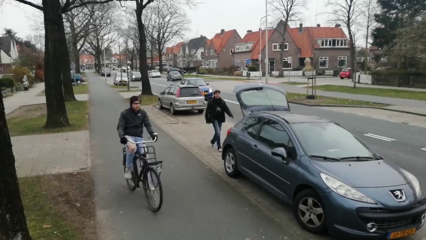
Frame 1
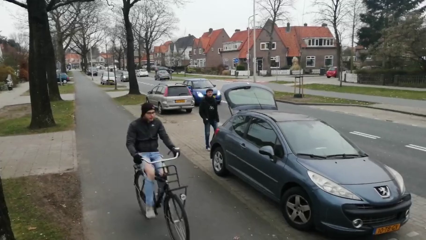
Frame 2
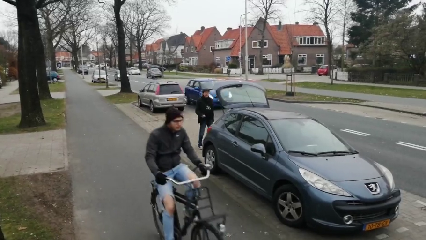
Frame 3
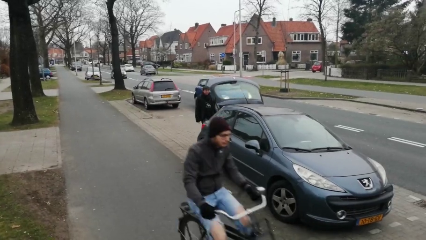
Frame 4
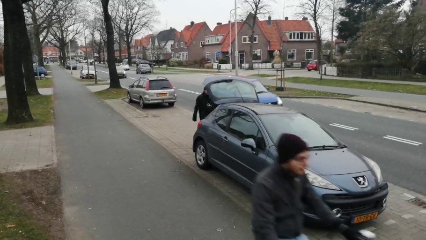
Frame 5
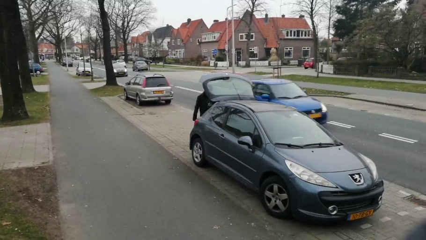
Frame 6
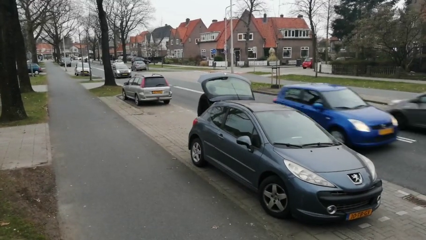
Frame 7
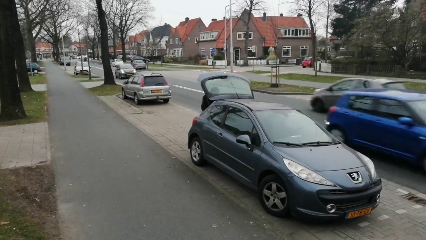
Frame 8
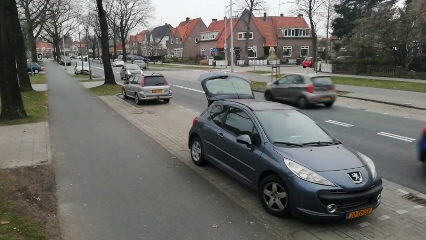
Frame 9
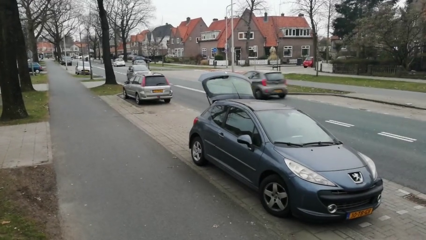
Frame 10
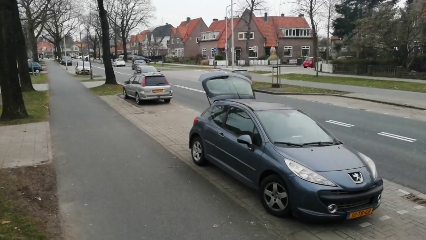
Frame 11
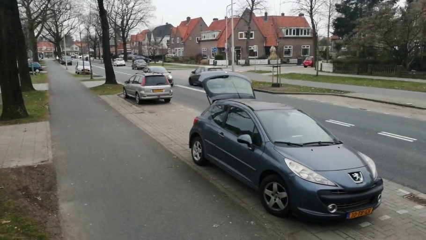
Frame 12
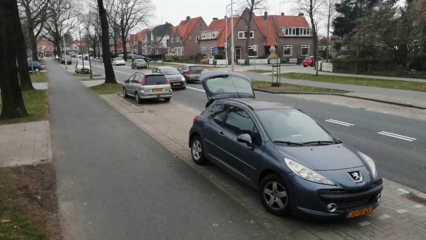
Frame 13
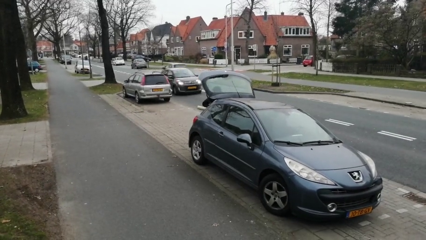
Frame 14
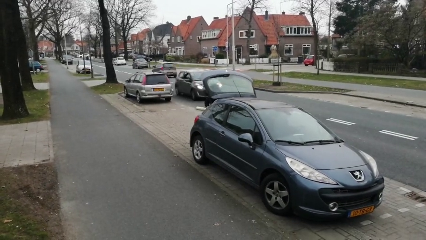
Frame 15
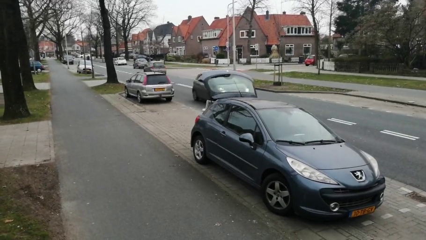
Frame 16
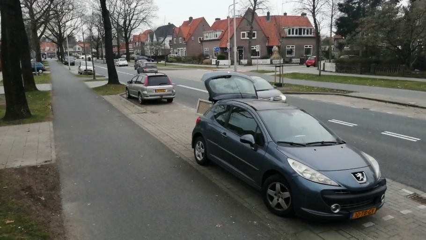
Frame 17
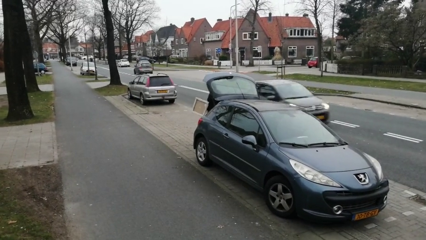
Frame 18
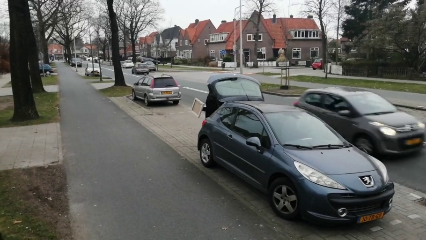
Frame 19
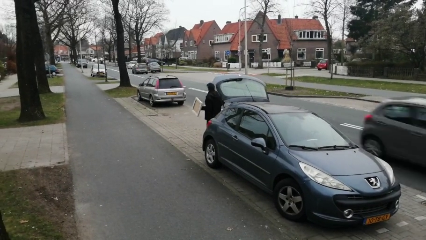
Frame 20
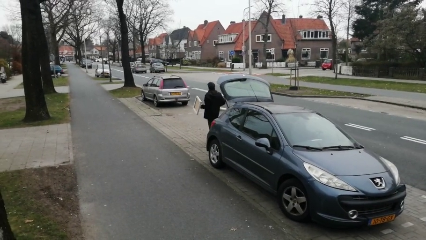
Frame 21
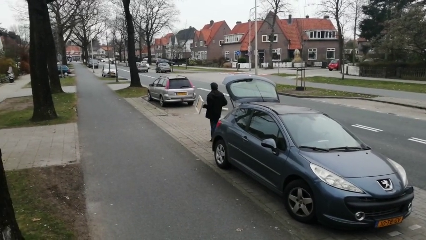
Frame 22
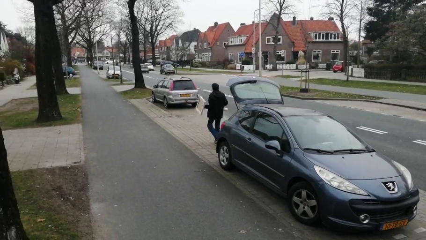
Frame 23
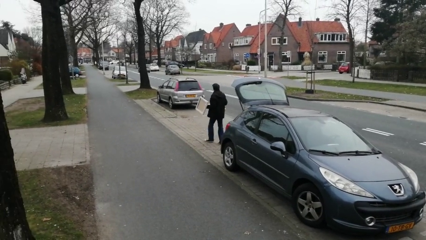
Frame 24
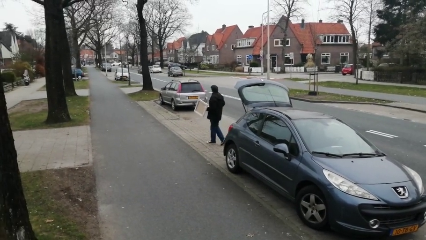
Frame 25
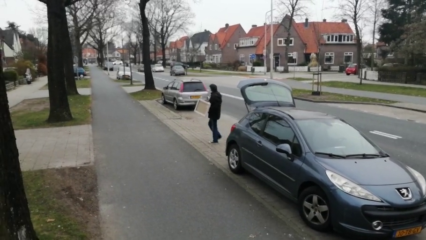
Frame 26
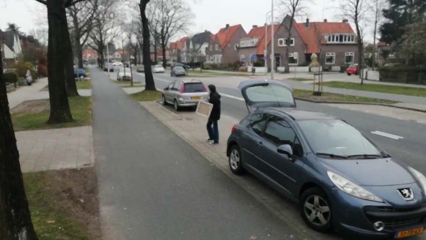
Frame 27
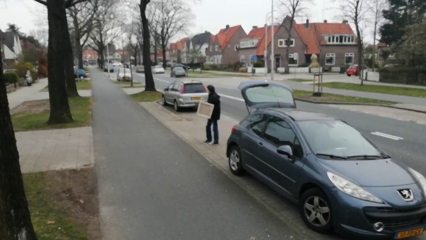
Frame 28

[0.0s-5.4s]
person unloads car

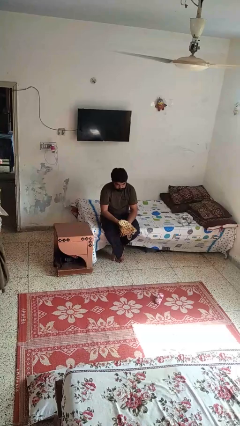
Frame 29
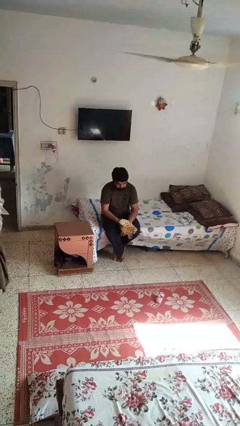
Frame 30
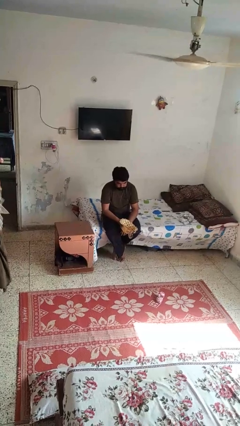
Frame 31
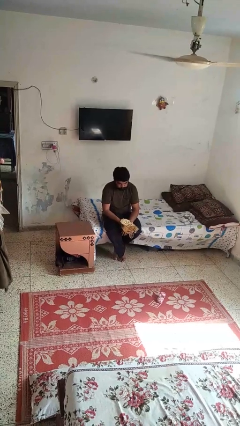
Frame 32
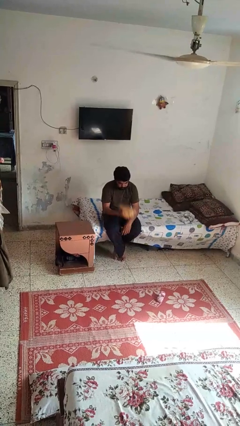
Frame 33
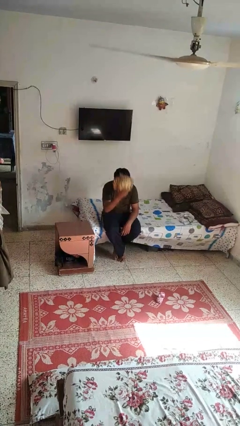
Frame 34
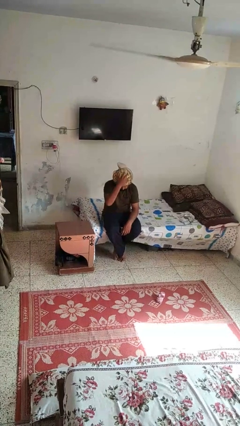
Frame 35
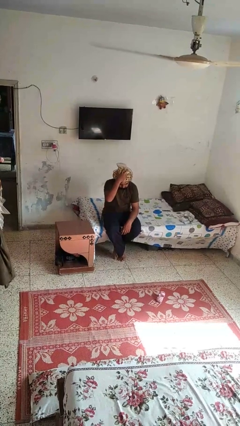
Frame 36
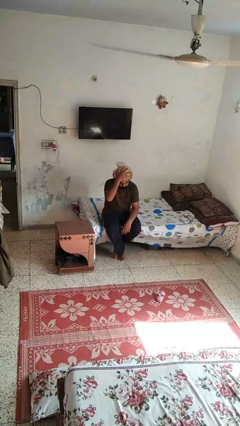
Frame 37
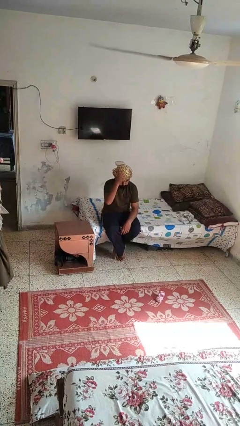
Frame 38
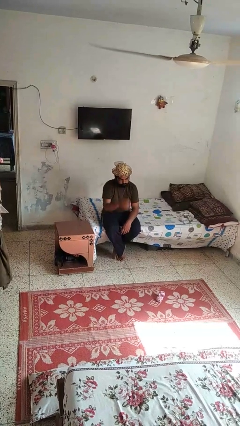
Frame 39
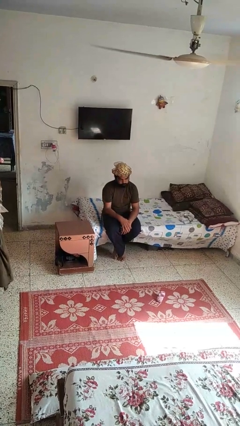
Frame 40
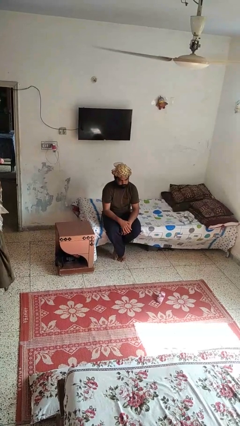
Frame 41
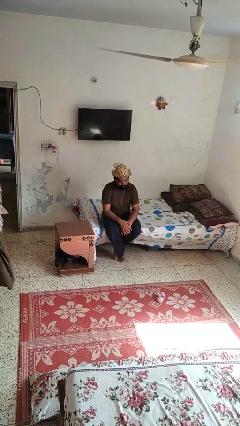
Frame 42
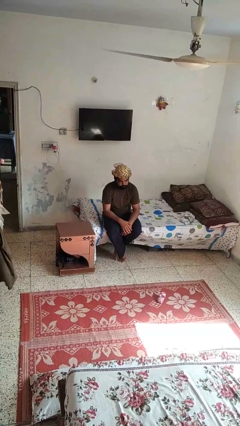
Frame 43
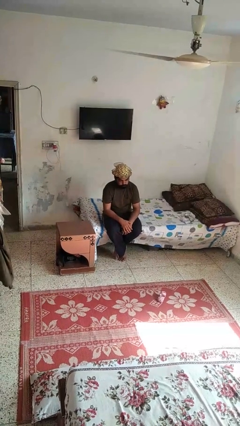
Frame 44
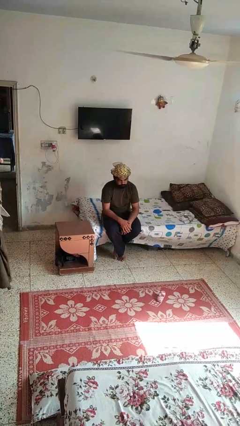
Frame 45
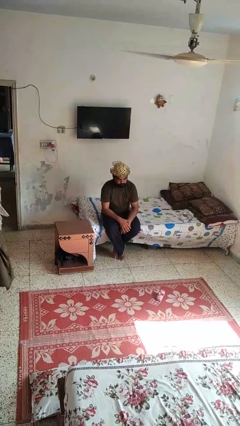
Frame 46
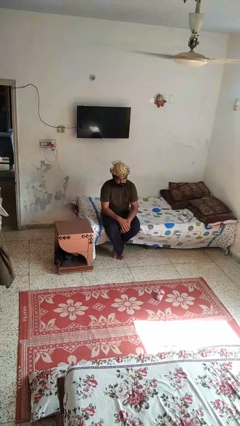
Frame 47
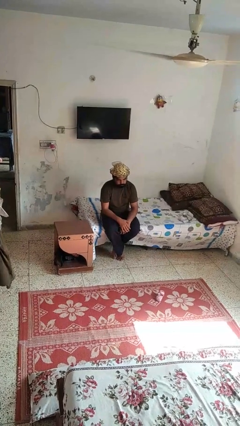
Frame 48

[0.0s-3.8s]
person puts on hat

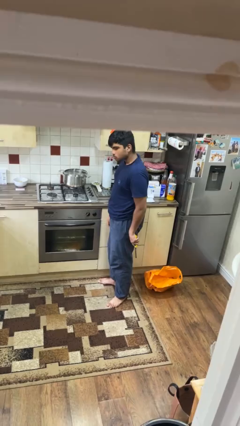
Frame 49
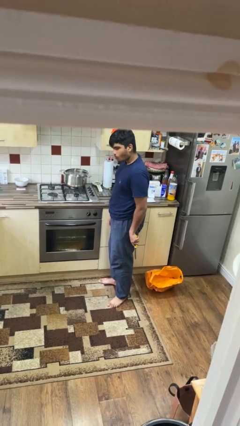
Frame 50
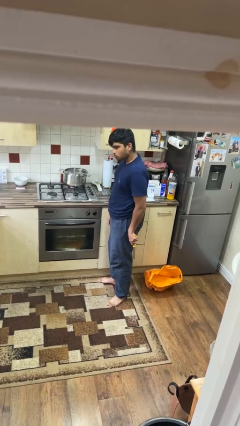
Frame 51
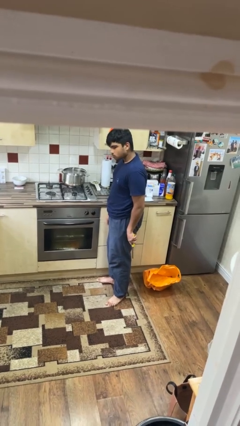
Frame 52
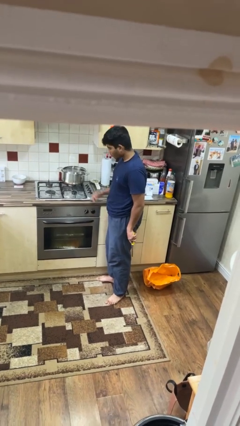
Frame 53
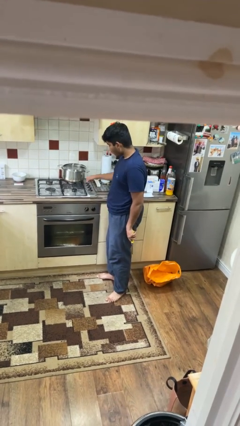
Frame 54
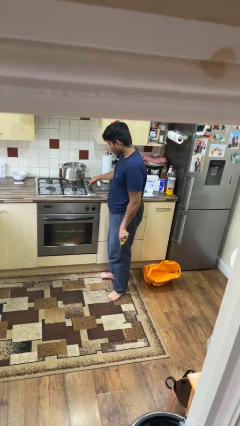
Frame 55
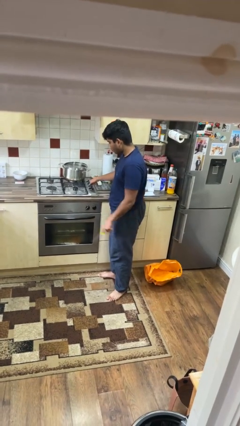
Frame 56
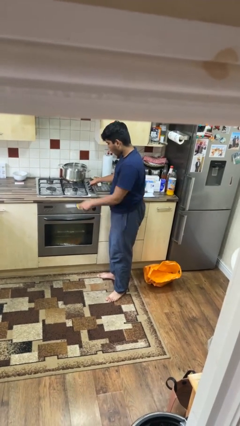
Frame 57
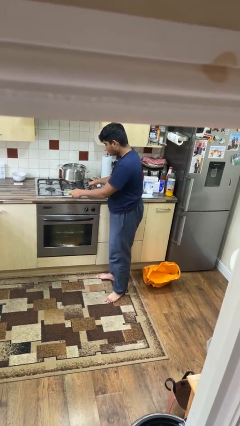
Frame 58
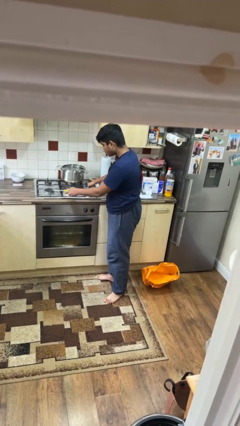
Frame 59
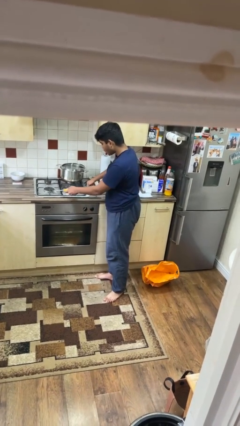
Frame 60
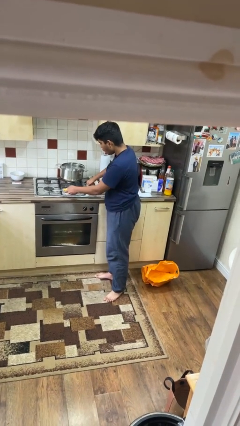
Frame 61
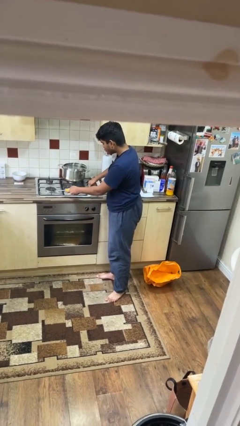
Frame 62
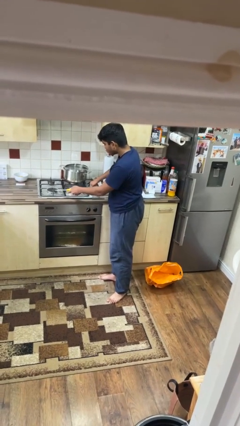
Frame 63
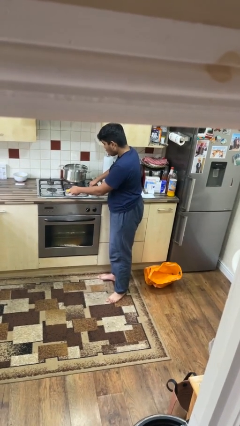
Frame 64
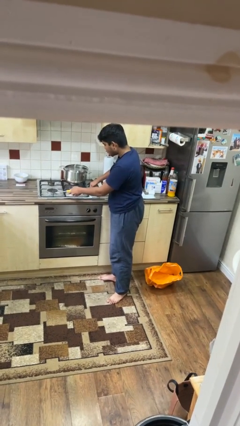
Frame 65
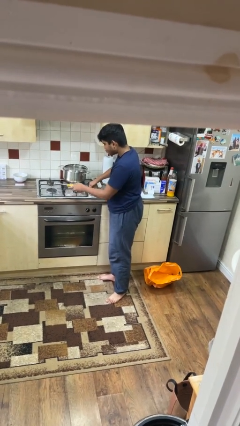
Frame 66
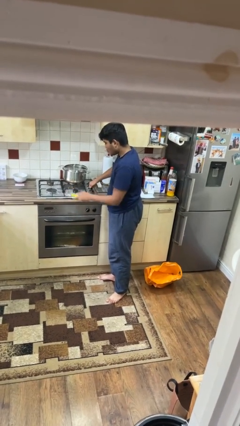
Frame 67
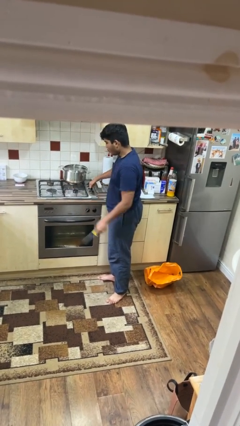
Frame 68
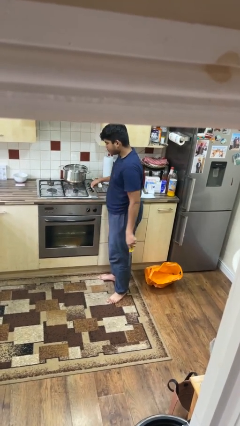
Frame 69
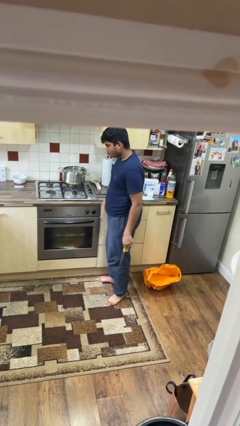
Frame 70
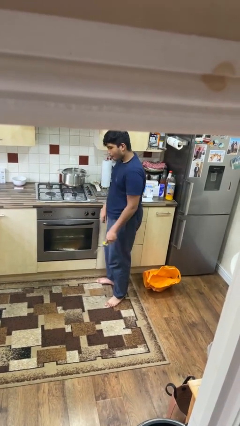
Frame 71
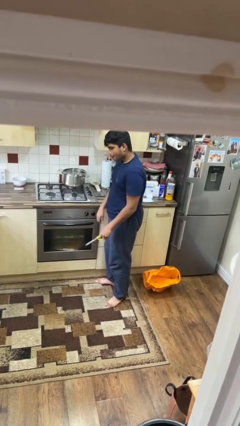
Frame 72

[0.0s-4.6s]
person turns on stovetop

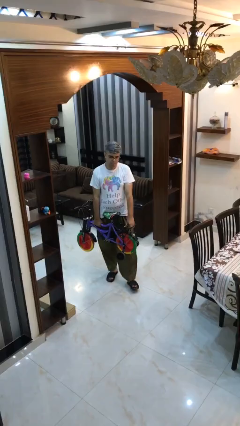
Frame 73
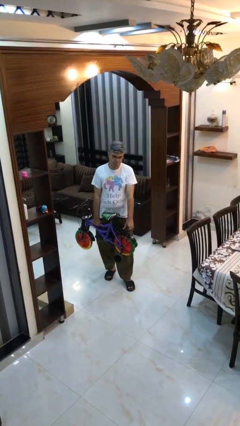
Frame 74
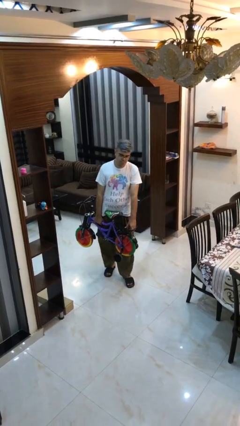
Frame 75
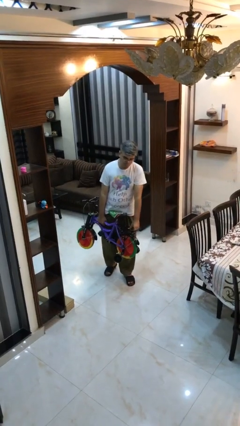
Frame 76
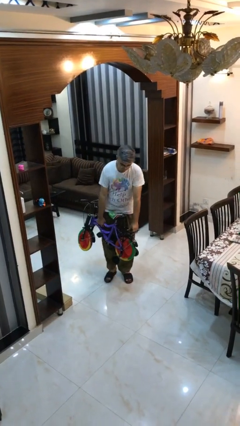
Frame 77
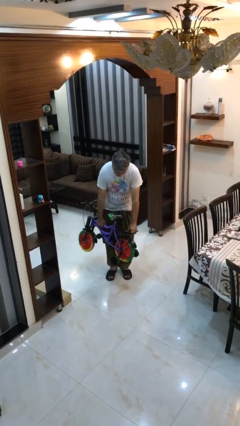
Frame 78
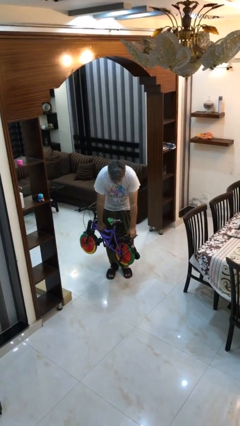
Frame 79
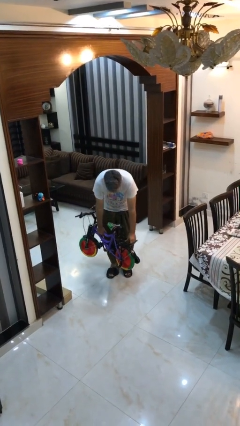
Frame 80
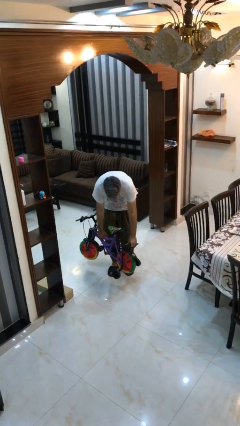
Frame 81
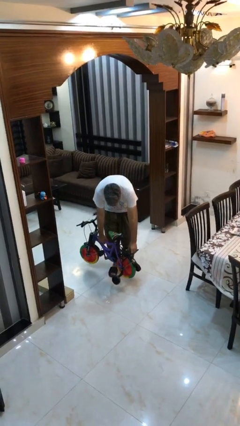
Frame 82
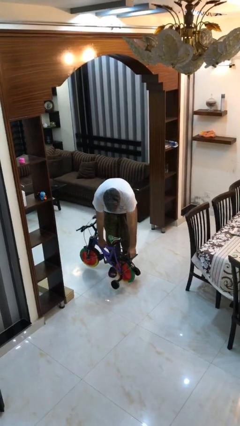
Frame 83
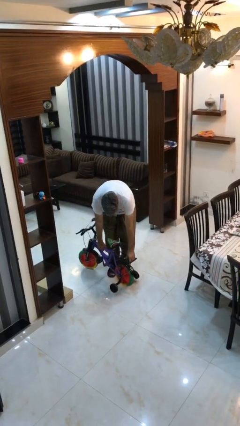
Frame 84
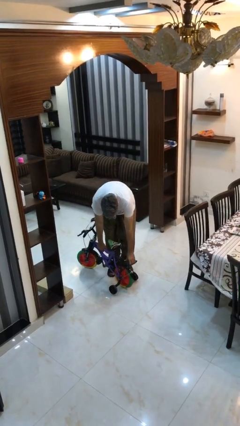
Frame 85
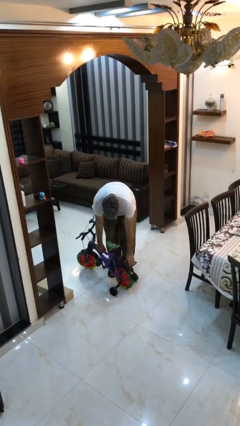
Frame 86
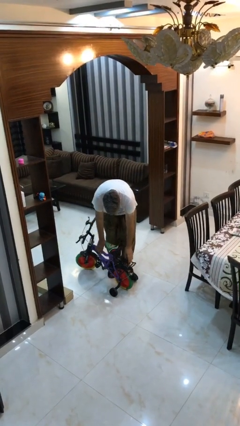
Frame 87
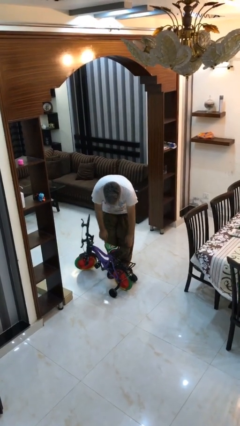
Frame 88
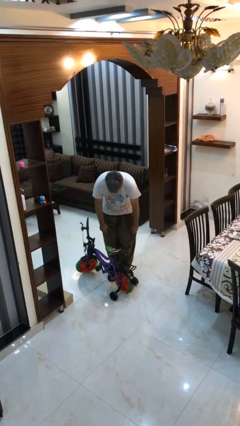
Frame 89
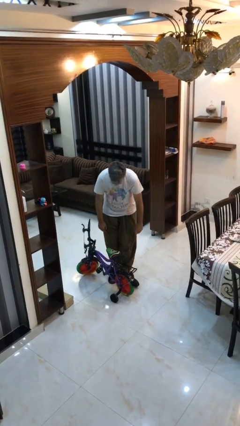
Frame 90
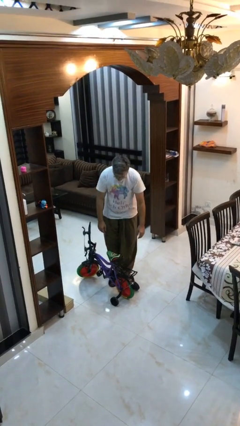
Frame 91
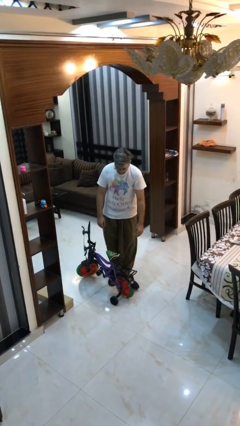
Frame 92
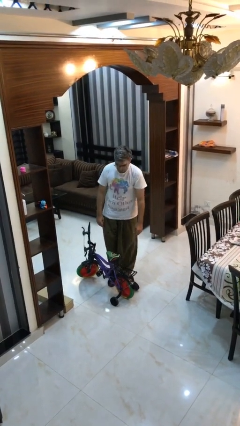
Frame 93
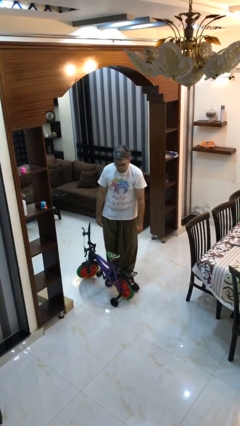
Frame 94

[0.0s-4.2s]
person puts down object on floor
